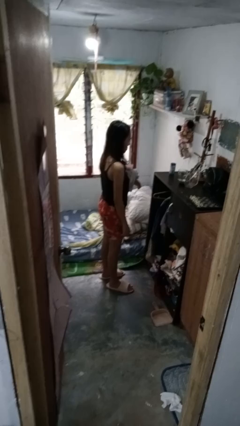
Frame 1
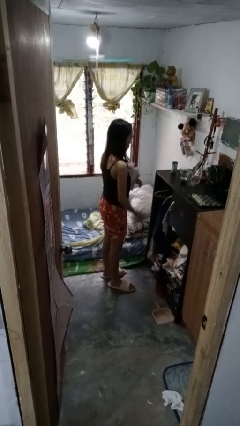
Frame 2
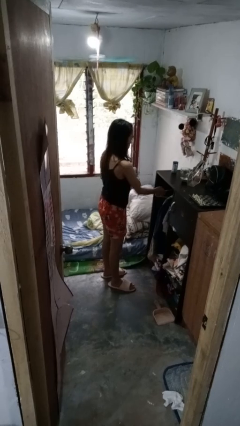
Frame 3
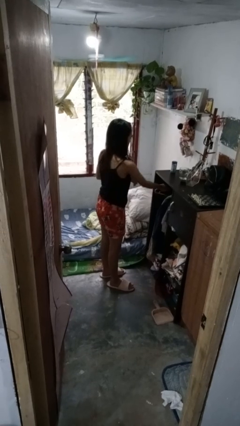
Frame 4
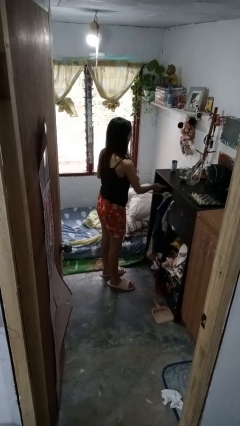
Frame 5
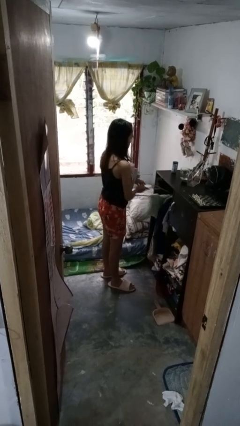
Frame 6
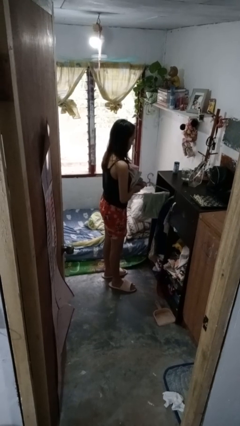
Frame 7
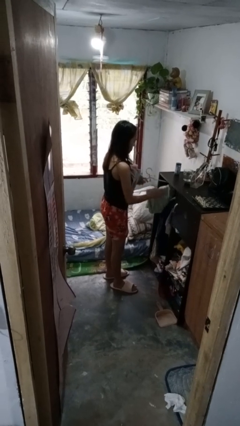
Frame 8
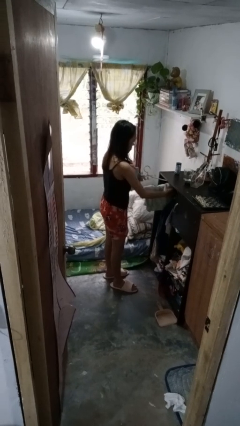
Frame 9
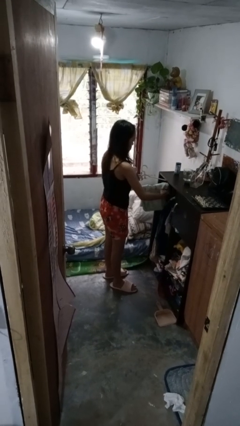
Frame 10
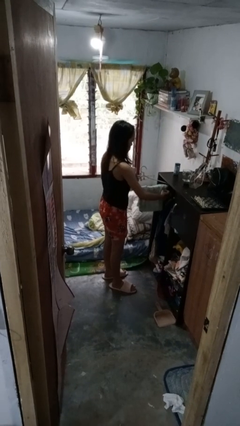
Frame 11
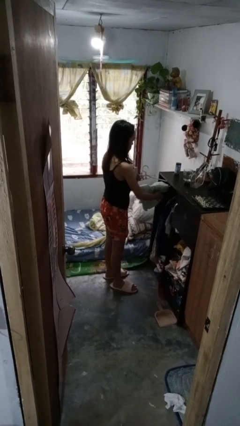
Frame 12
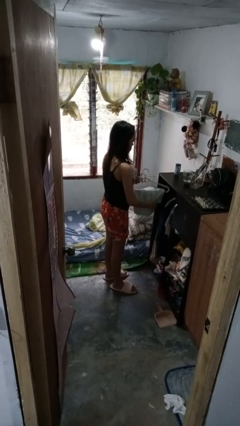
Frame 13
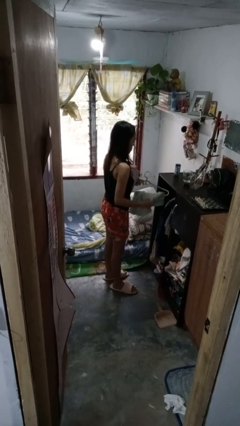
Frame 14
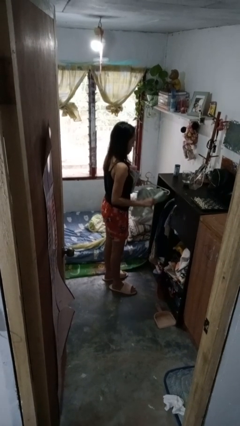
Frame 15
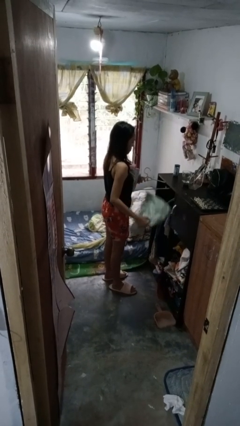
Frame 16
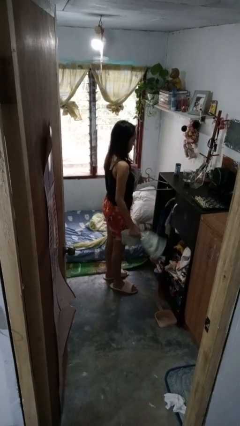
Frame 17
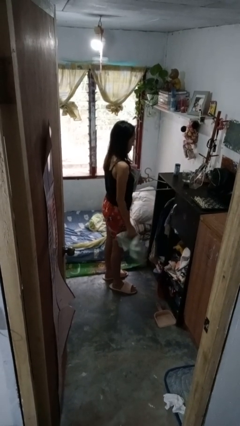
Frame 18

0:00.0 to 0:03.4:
person takes clothes from closet

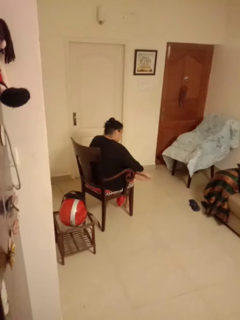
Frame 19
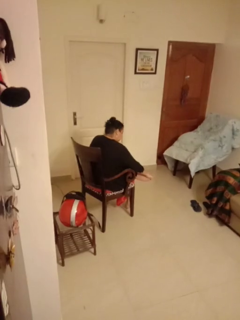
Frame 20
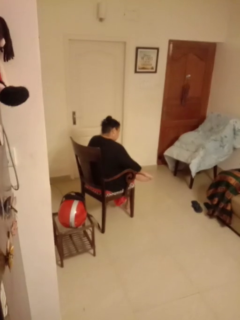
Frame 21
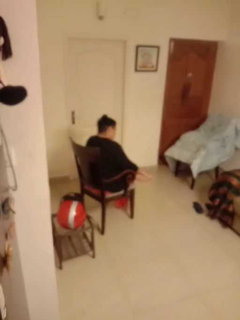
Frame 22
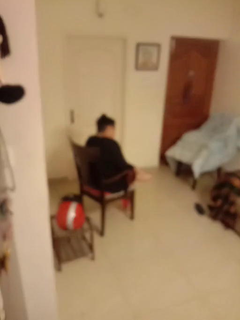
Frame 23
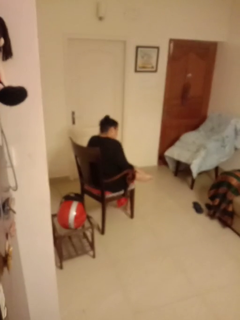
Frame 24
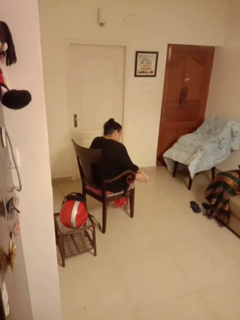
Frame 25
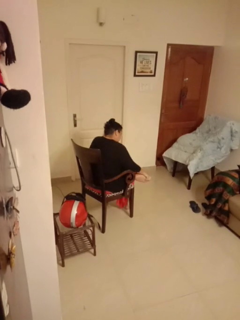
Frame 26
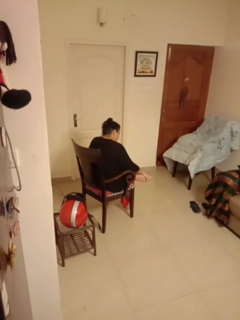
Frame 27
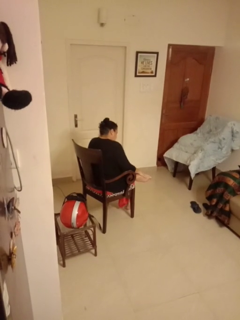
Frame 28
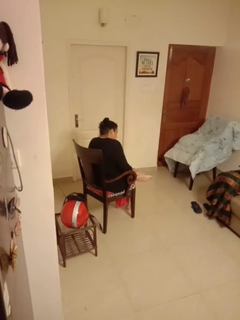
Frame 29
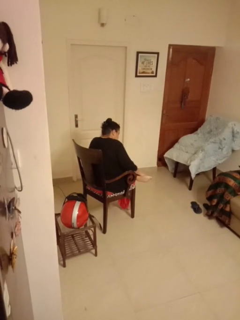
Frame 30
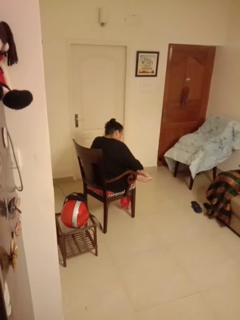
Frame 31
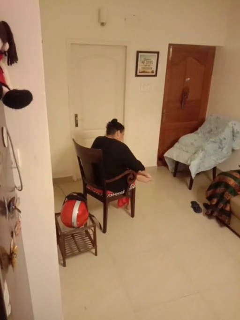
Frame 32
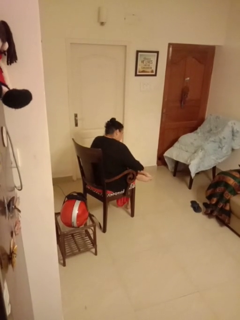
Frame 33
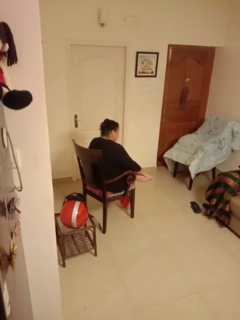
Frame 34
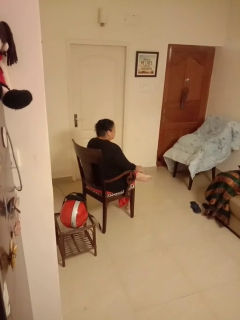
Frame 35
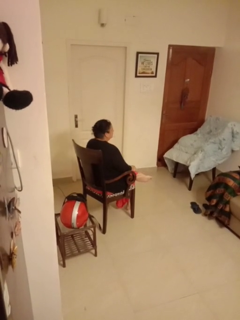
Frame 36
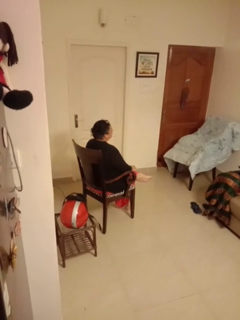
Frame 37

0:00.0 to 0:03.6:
person rubs foot

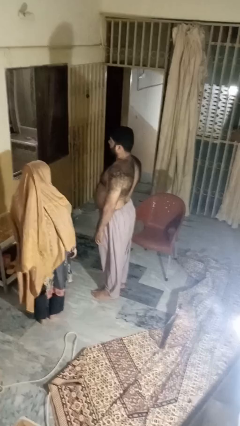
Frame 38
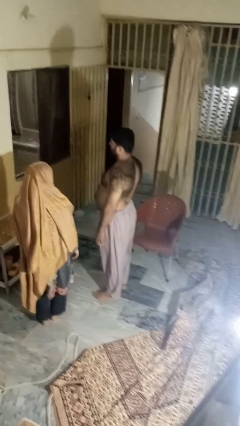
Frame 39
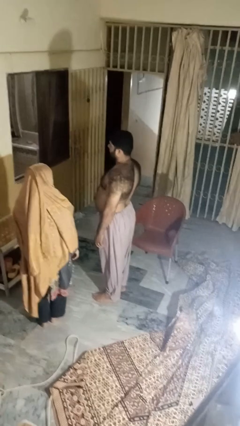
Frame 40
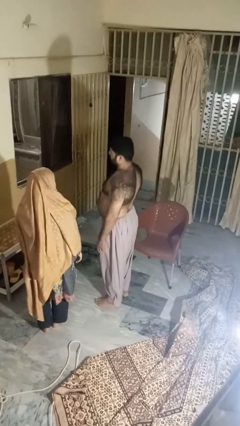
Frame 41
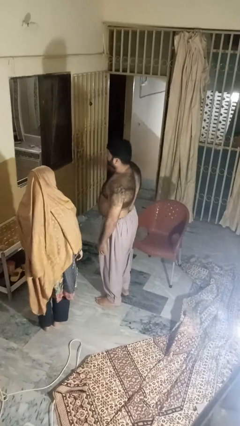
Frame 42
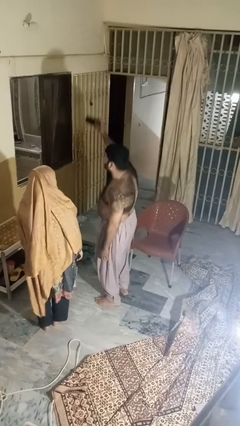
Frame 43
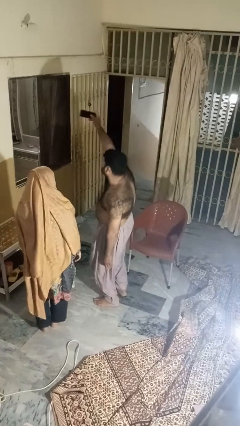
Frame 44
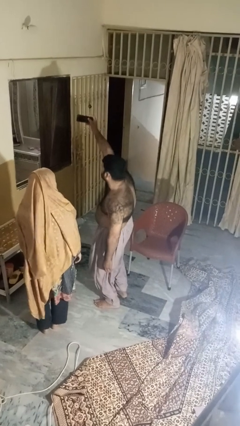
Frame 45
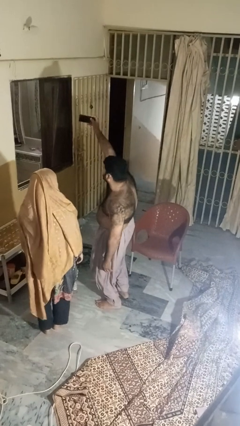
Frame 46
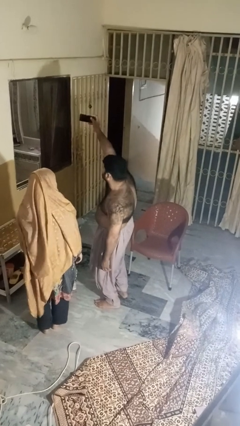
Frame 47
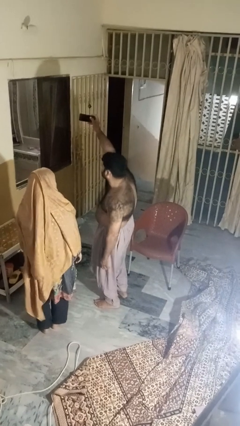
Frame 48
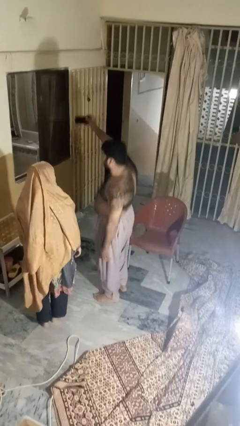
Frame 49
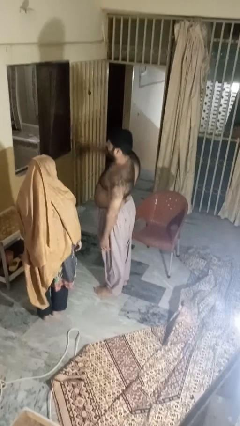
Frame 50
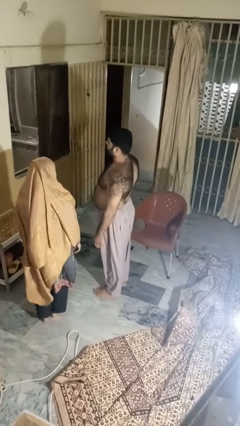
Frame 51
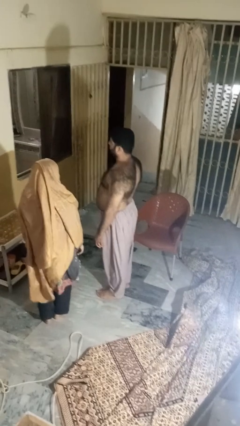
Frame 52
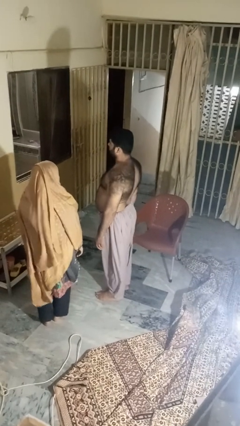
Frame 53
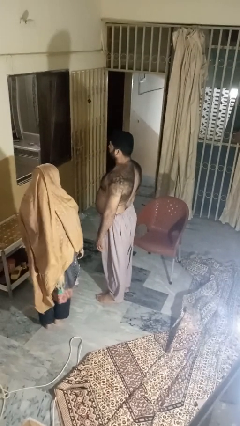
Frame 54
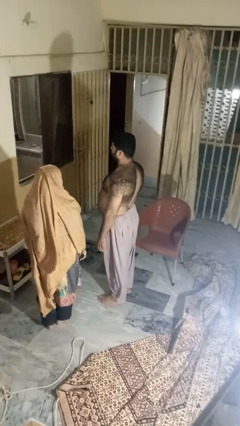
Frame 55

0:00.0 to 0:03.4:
person takes selfie with person

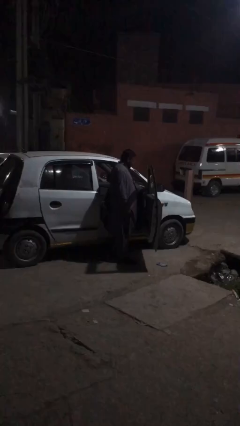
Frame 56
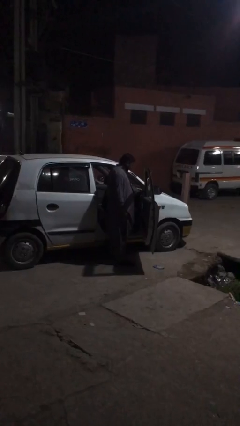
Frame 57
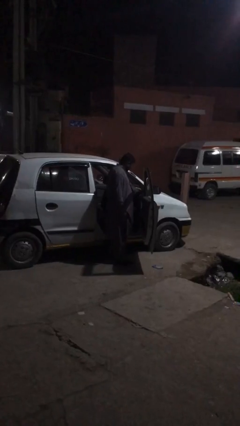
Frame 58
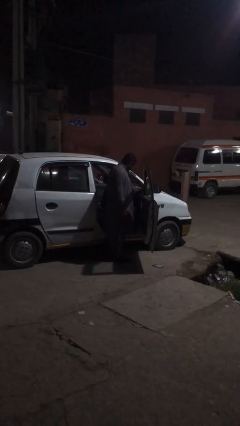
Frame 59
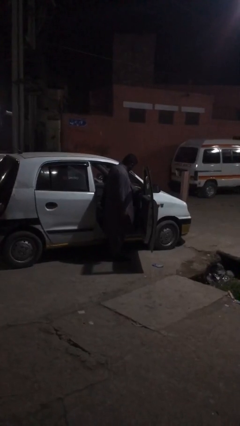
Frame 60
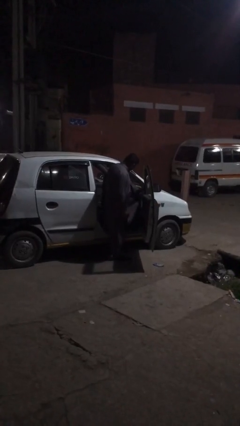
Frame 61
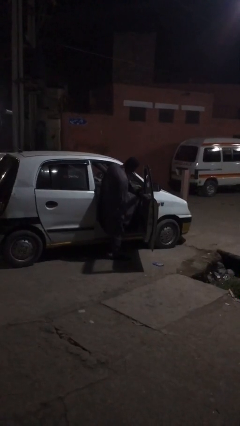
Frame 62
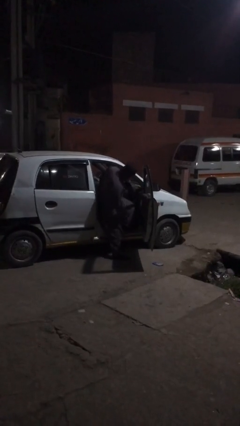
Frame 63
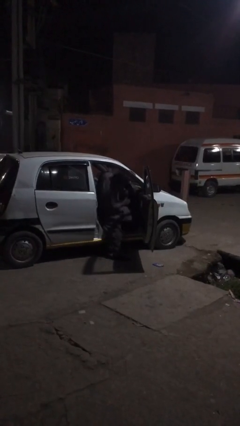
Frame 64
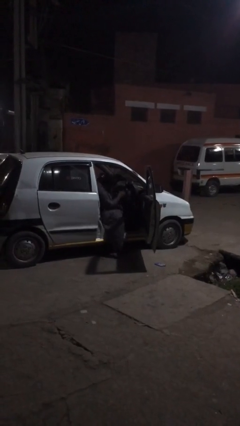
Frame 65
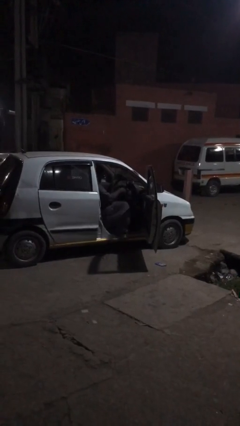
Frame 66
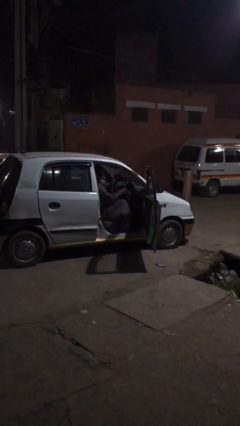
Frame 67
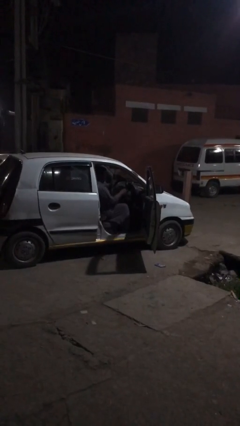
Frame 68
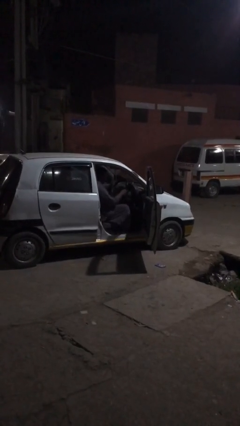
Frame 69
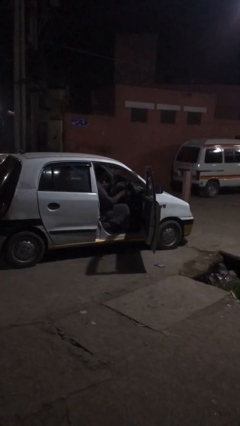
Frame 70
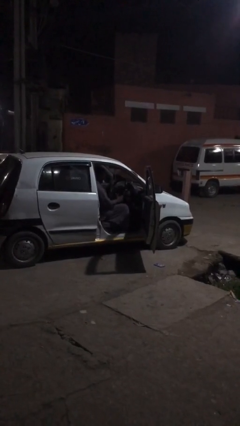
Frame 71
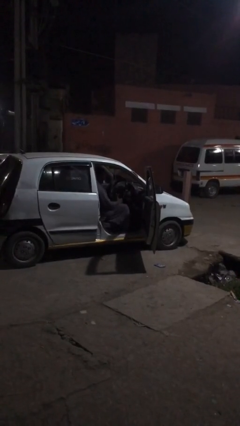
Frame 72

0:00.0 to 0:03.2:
person enters car

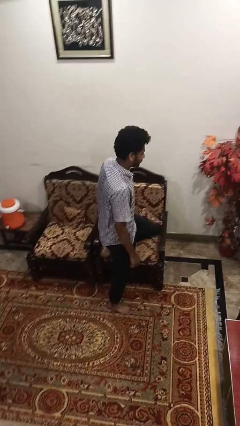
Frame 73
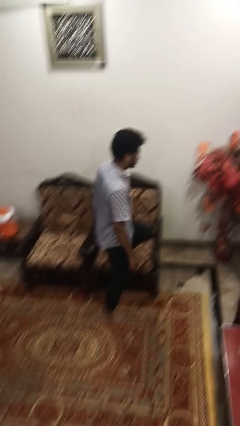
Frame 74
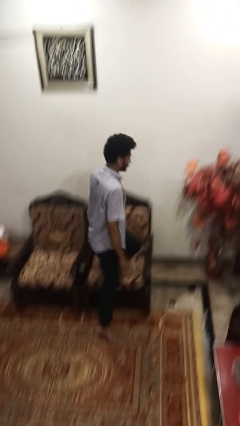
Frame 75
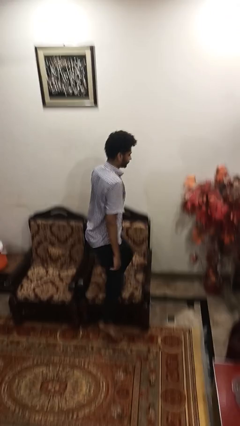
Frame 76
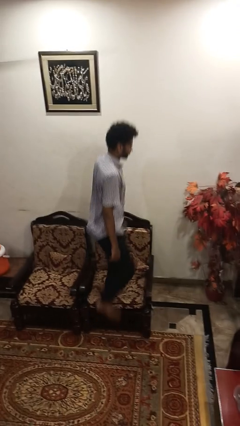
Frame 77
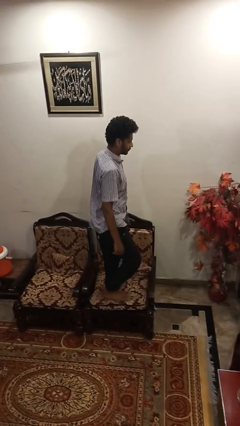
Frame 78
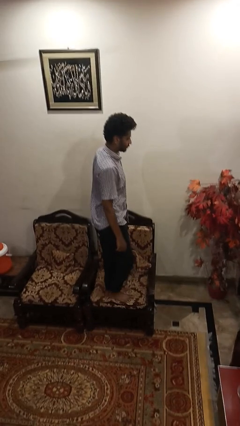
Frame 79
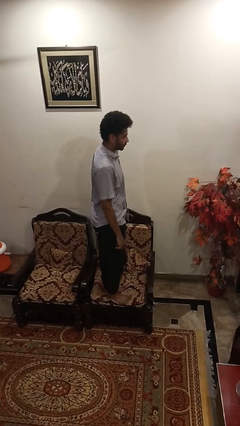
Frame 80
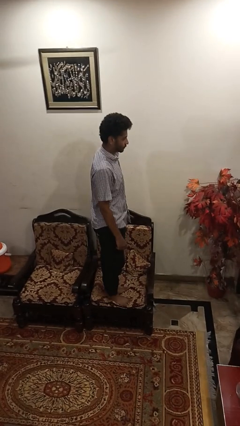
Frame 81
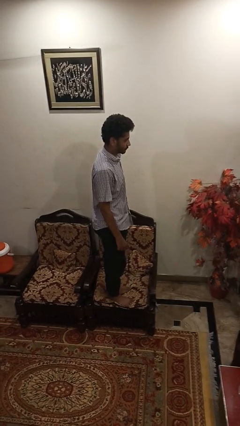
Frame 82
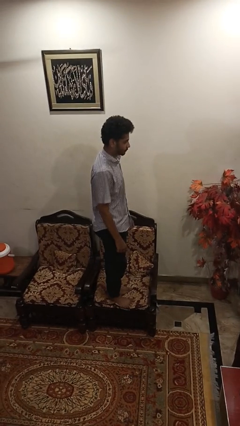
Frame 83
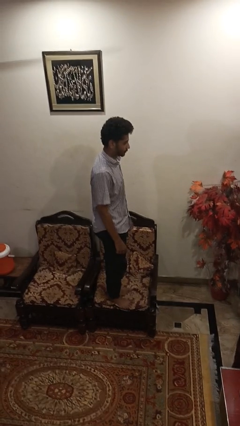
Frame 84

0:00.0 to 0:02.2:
person climbs on couch

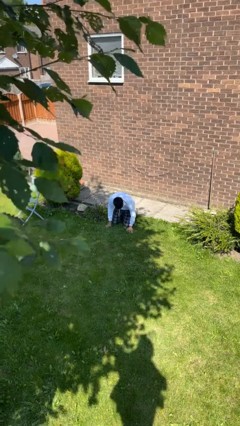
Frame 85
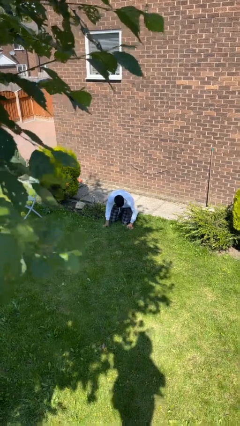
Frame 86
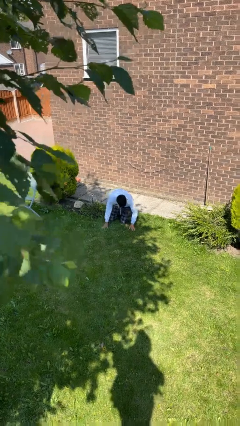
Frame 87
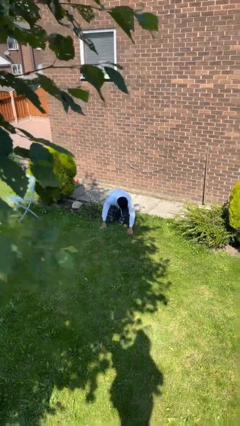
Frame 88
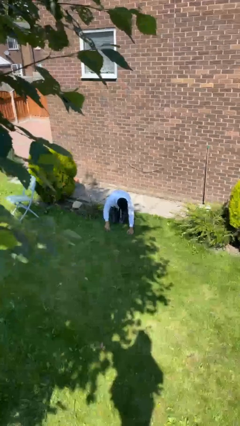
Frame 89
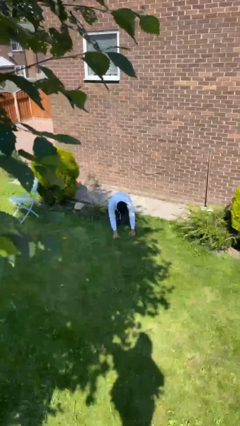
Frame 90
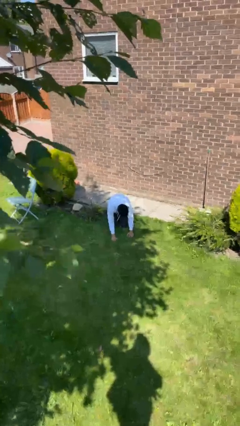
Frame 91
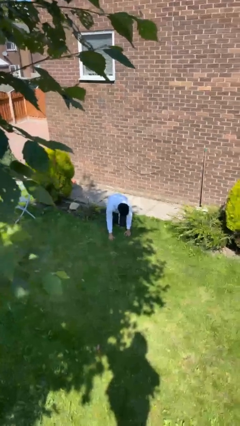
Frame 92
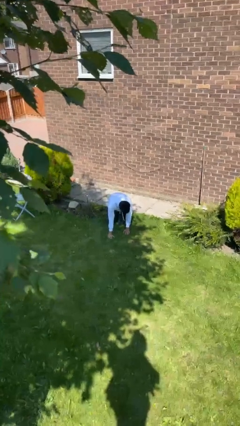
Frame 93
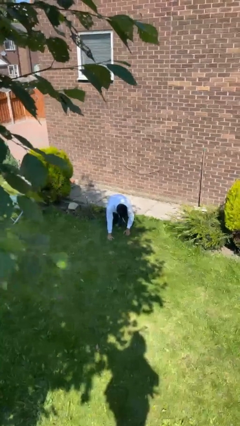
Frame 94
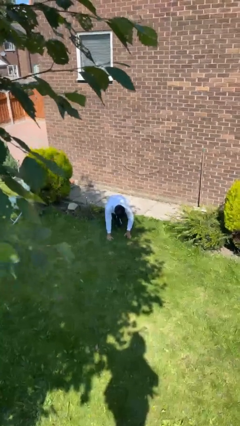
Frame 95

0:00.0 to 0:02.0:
person crawls
